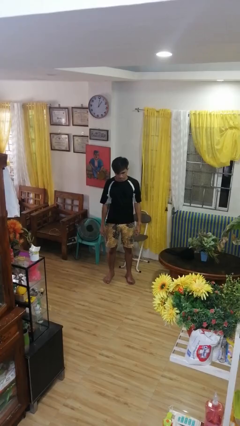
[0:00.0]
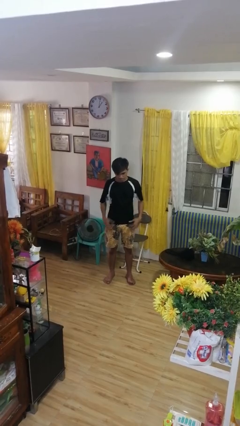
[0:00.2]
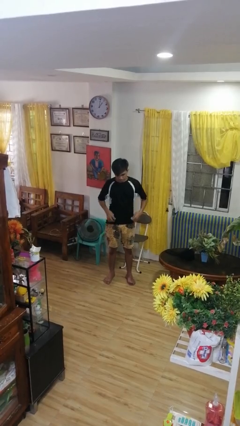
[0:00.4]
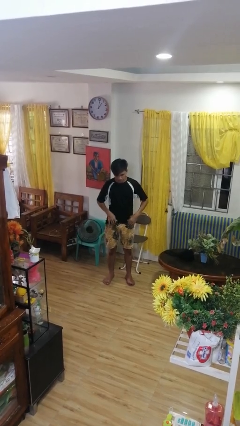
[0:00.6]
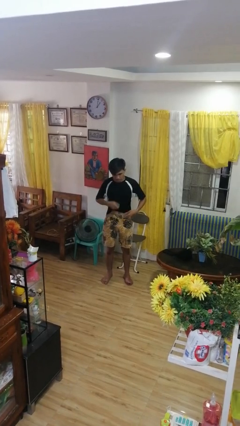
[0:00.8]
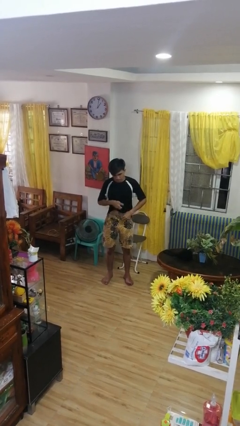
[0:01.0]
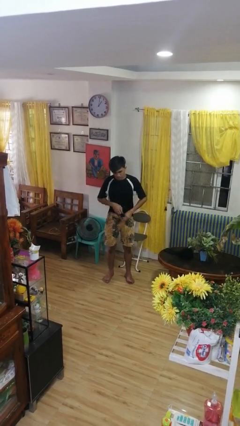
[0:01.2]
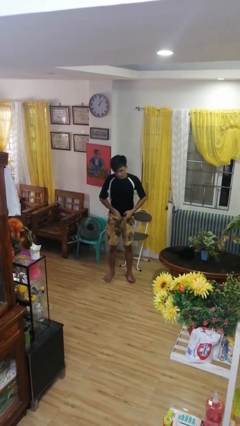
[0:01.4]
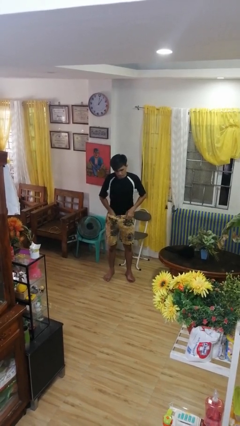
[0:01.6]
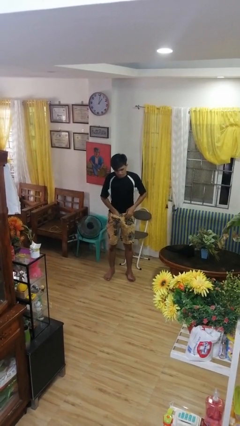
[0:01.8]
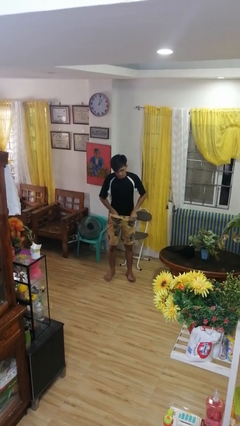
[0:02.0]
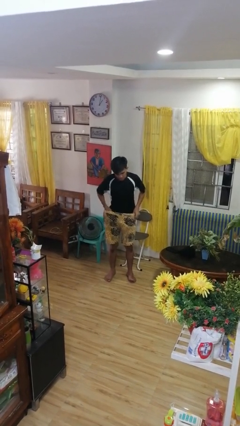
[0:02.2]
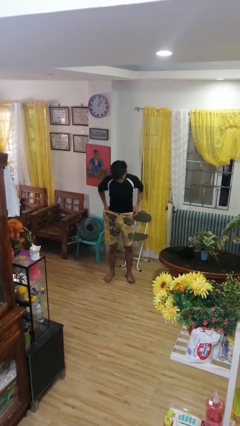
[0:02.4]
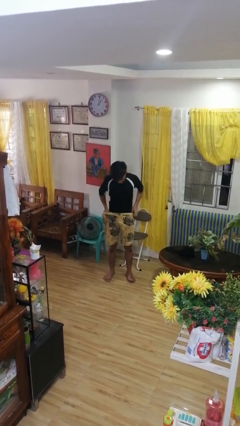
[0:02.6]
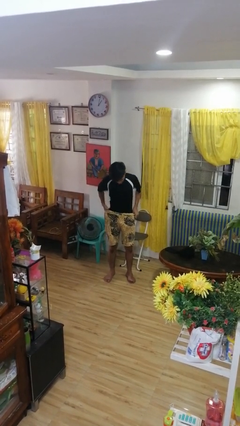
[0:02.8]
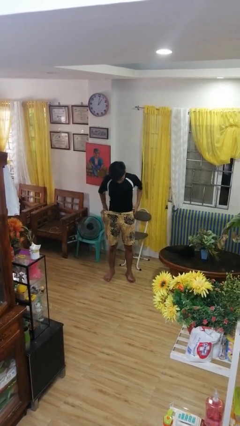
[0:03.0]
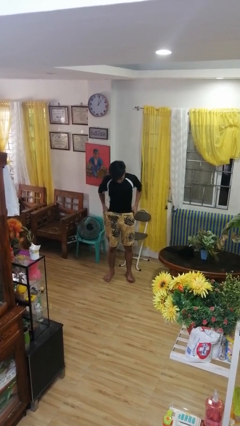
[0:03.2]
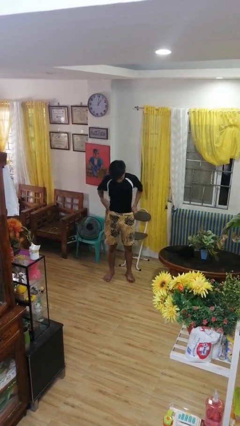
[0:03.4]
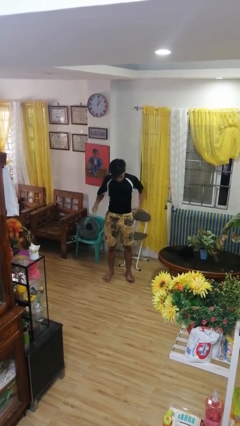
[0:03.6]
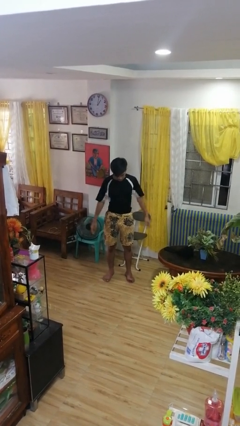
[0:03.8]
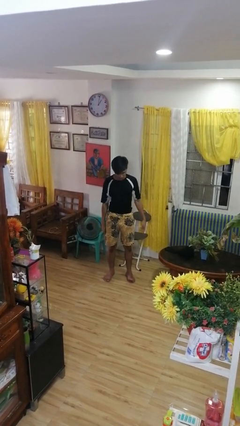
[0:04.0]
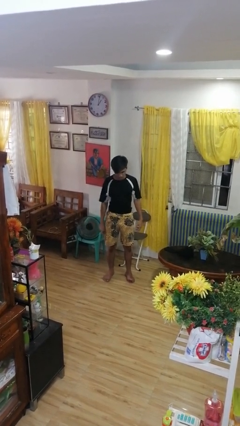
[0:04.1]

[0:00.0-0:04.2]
person tucks in shirt

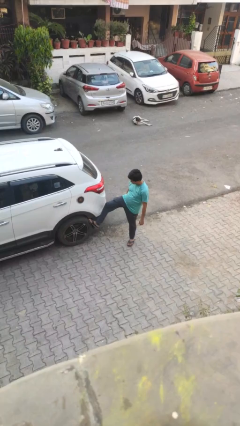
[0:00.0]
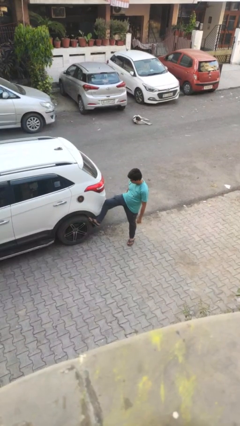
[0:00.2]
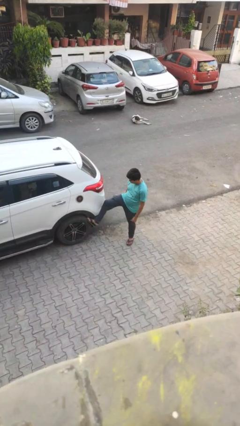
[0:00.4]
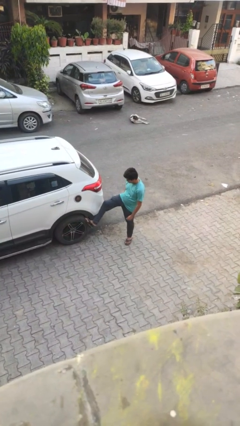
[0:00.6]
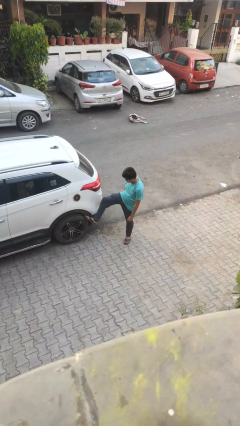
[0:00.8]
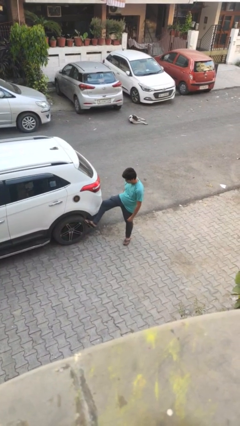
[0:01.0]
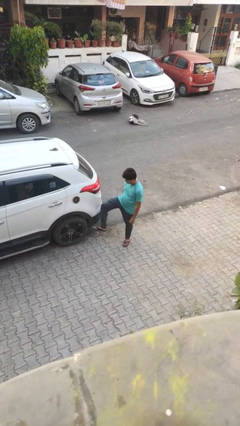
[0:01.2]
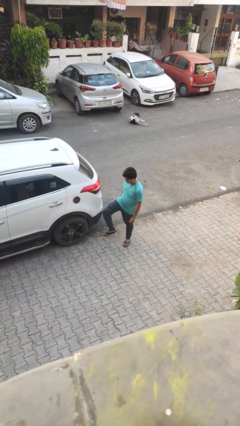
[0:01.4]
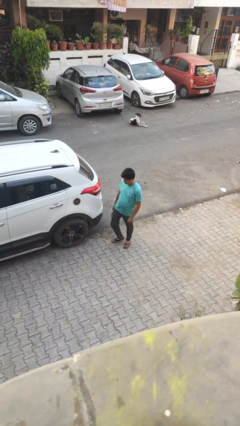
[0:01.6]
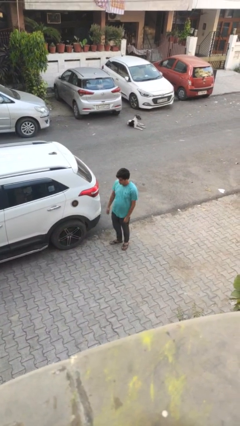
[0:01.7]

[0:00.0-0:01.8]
person kicks car tires

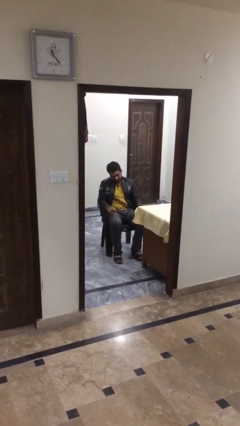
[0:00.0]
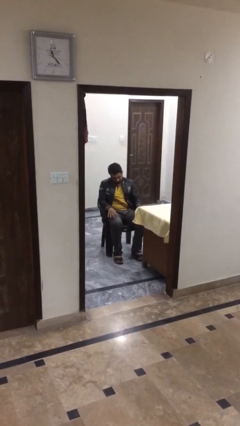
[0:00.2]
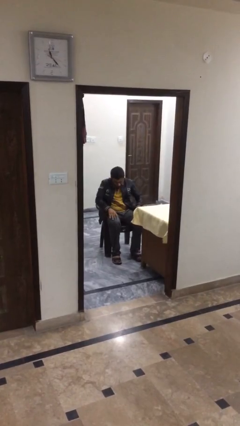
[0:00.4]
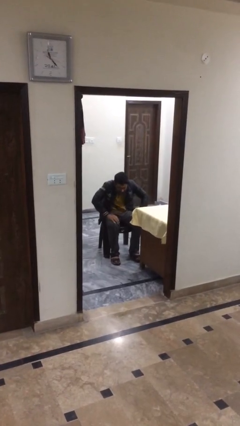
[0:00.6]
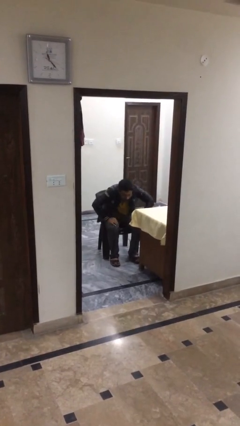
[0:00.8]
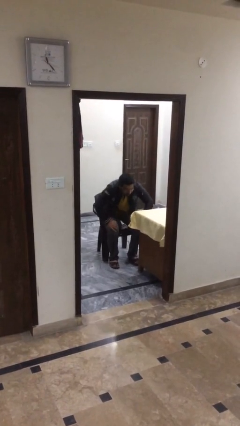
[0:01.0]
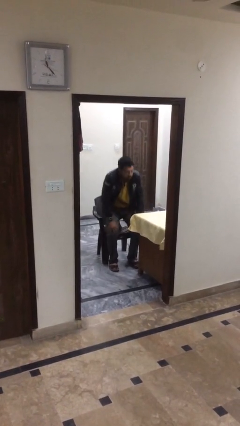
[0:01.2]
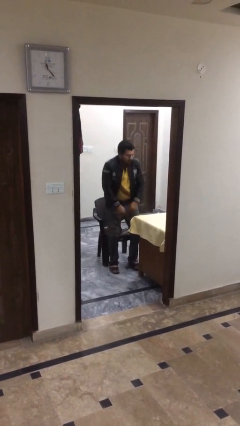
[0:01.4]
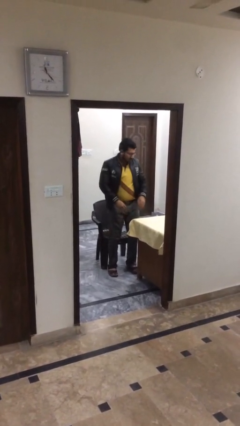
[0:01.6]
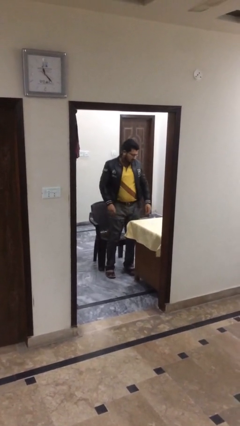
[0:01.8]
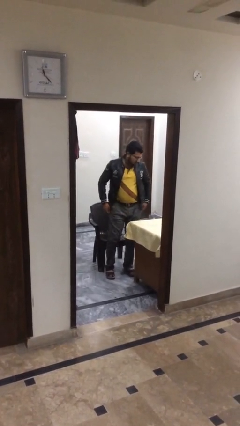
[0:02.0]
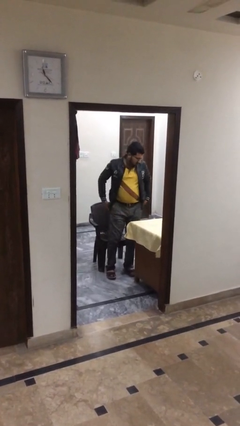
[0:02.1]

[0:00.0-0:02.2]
person stands up

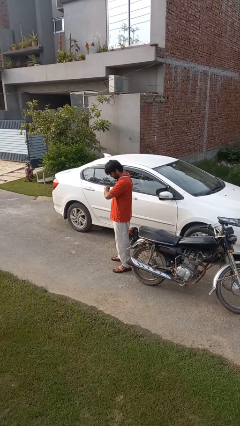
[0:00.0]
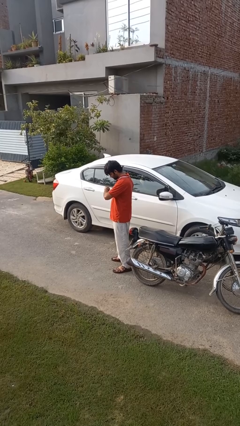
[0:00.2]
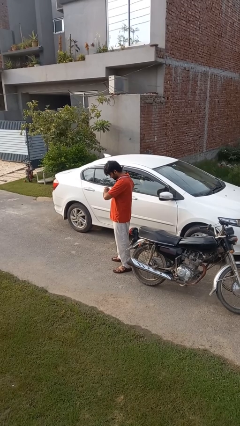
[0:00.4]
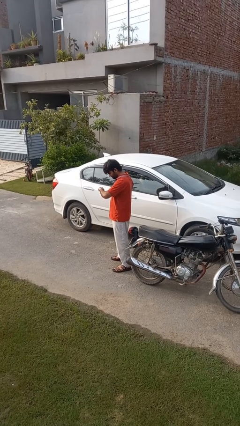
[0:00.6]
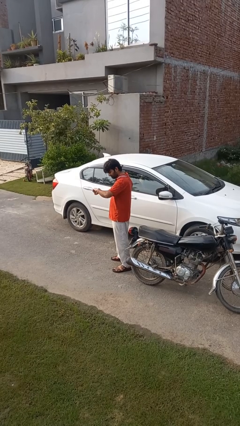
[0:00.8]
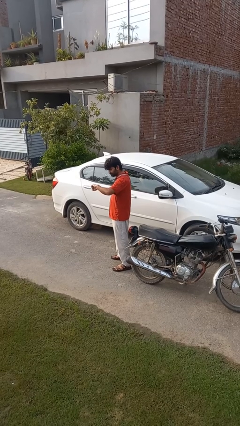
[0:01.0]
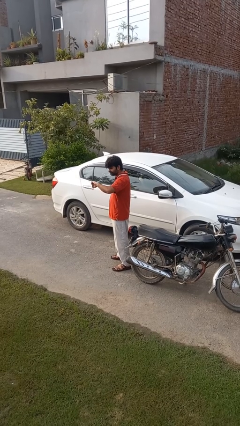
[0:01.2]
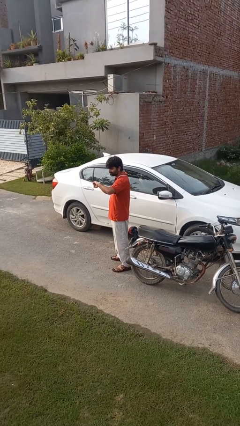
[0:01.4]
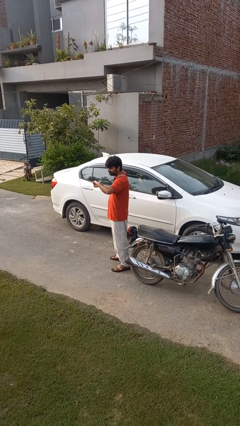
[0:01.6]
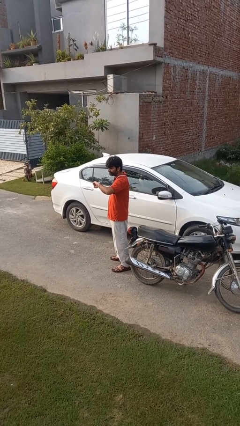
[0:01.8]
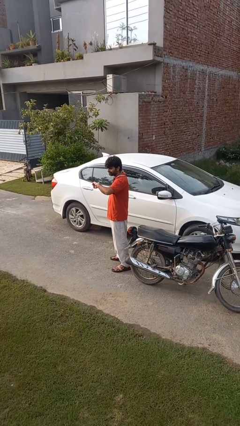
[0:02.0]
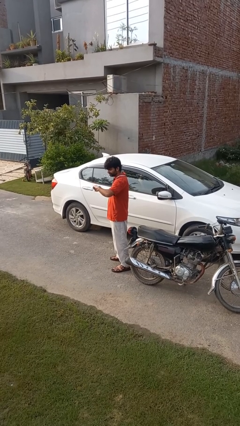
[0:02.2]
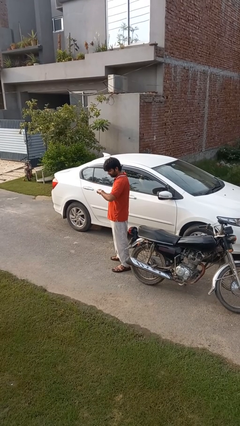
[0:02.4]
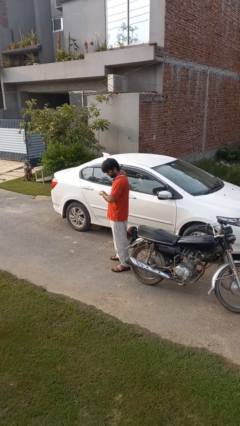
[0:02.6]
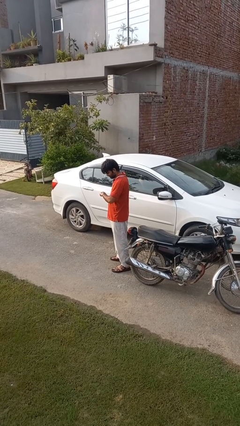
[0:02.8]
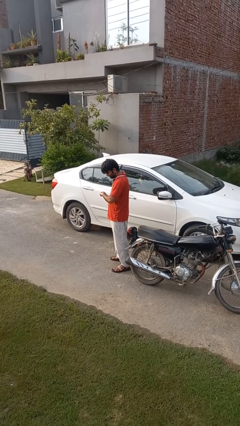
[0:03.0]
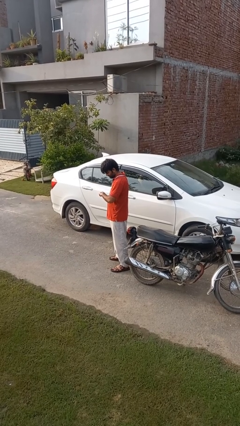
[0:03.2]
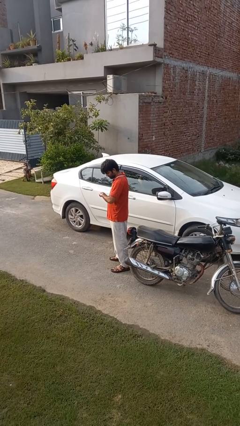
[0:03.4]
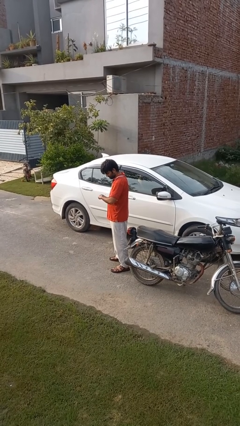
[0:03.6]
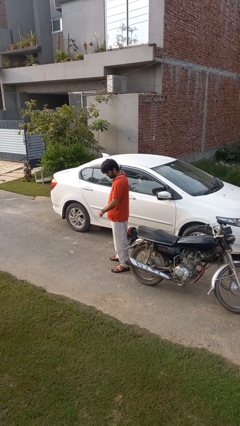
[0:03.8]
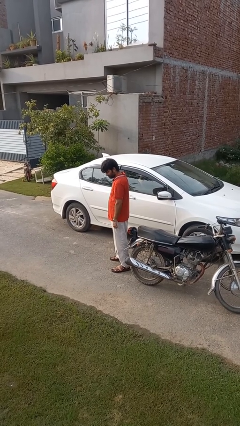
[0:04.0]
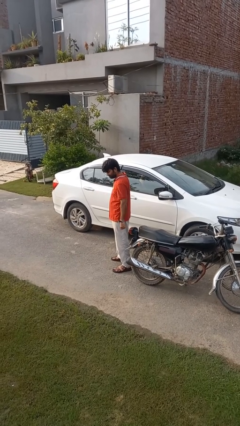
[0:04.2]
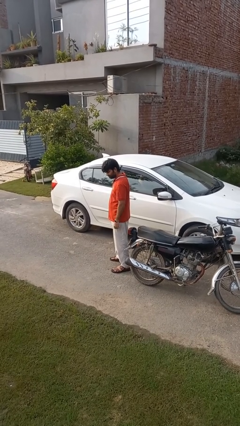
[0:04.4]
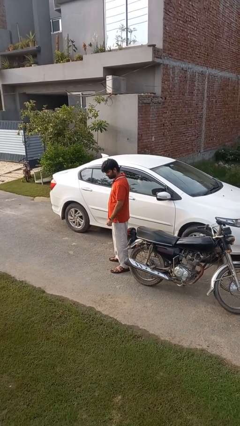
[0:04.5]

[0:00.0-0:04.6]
person looks at wristwatch

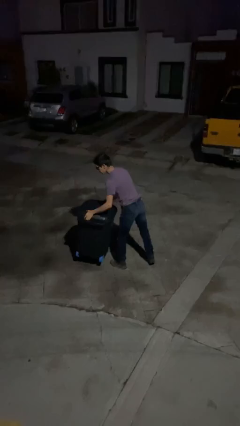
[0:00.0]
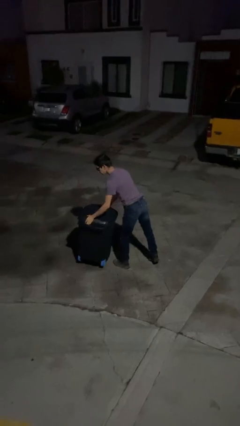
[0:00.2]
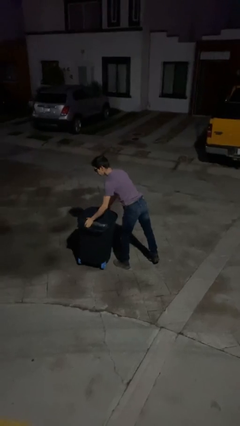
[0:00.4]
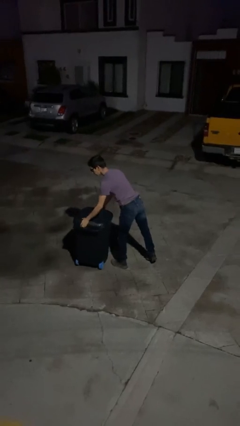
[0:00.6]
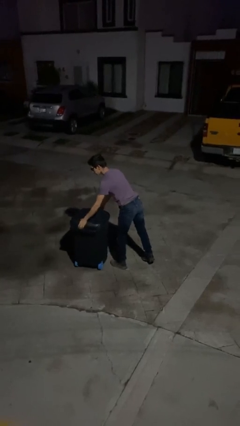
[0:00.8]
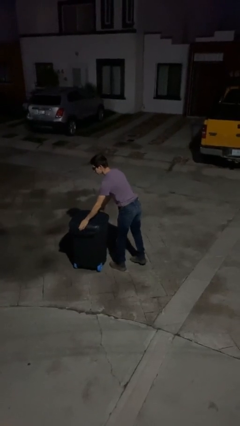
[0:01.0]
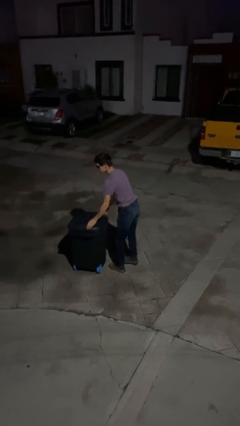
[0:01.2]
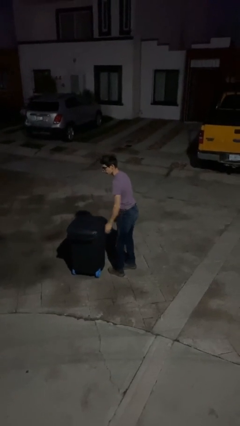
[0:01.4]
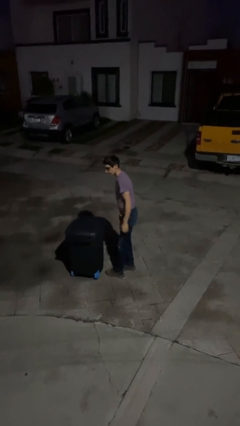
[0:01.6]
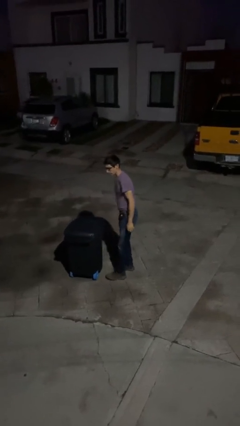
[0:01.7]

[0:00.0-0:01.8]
person puts down object on floor

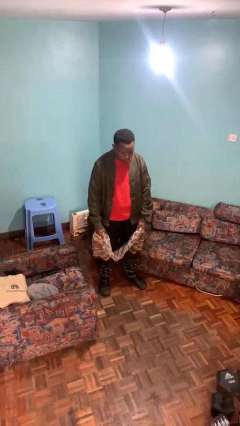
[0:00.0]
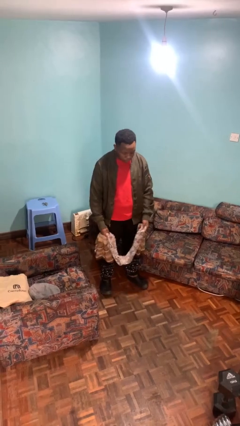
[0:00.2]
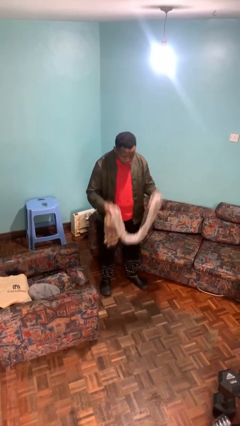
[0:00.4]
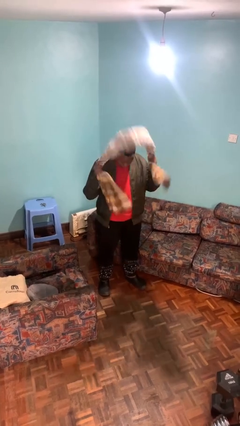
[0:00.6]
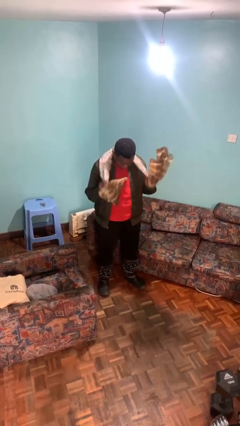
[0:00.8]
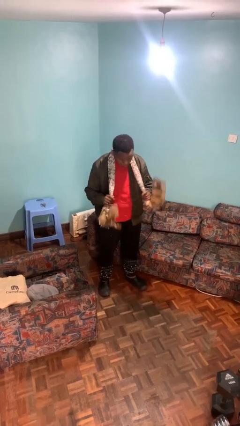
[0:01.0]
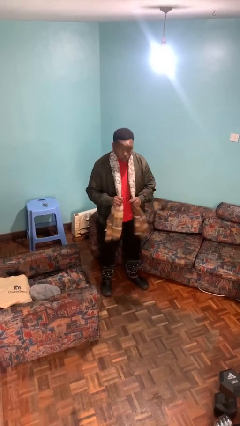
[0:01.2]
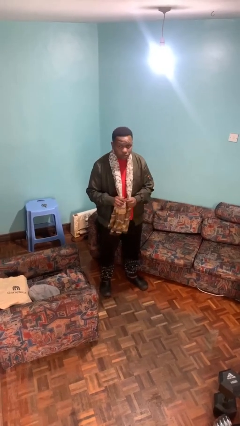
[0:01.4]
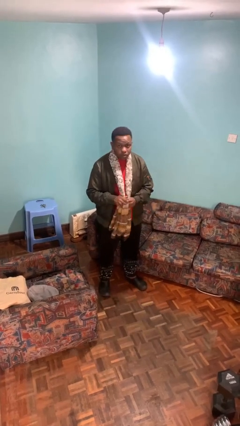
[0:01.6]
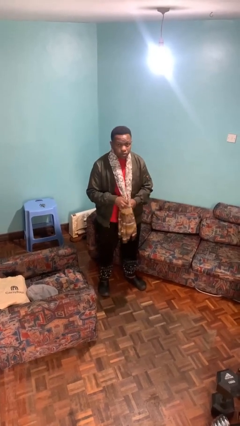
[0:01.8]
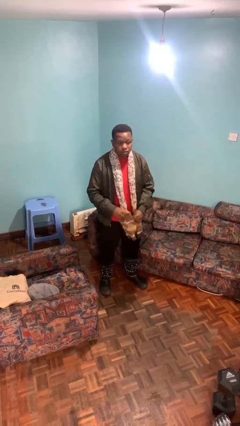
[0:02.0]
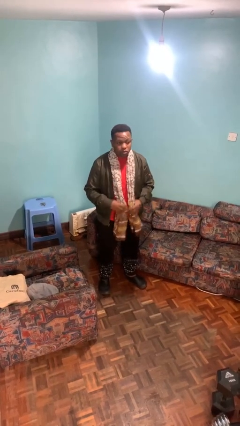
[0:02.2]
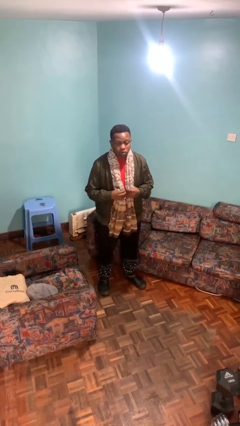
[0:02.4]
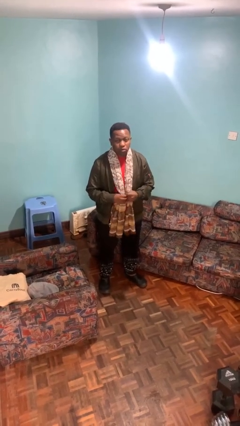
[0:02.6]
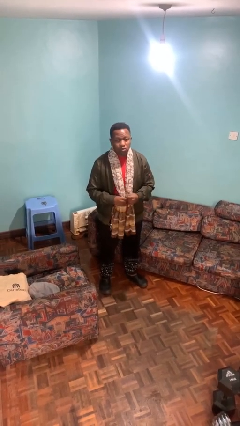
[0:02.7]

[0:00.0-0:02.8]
person puts on scarf
